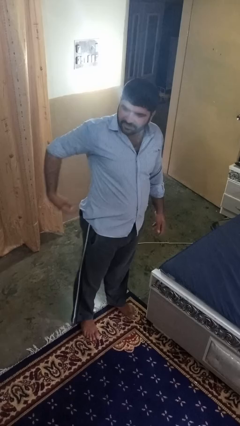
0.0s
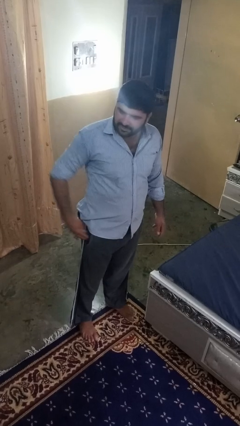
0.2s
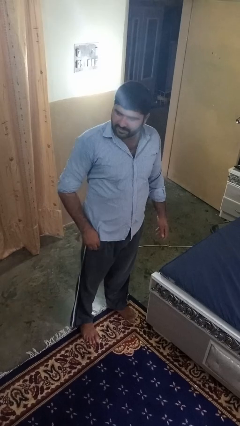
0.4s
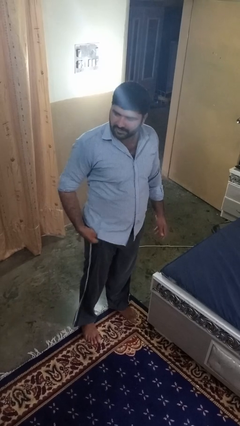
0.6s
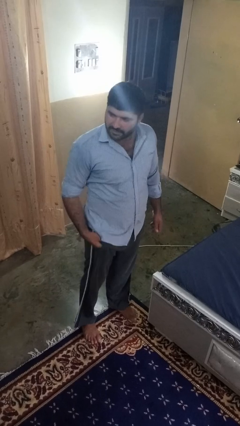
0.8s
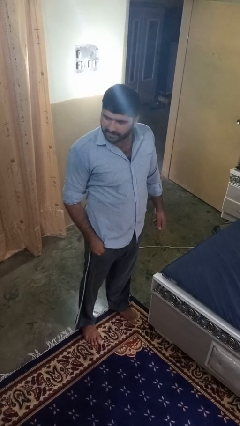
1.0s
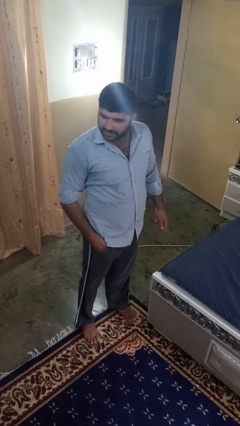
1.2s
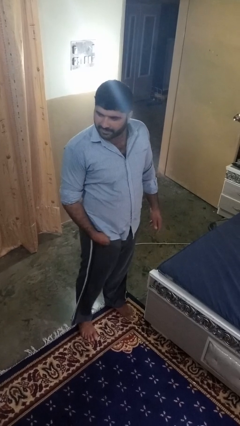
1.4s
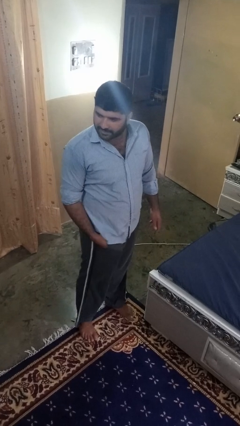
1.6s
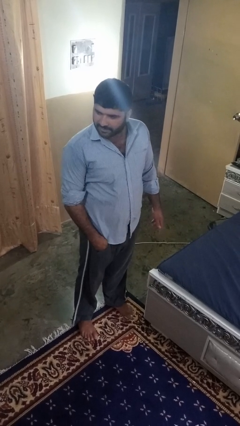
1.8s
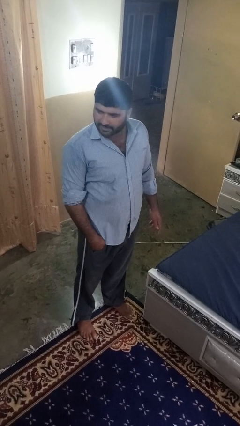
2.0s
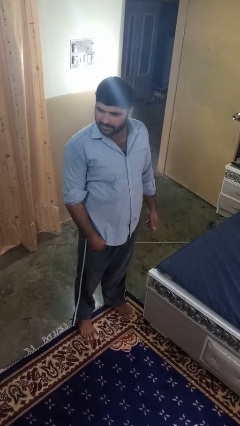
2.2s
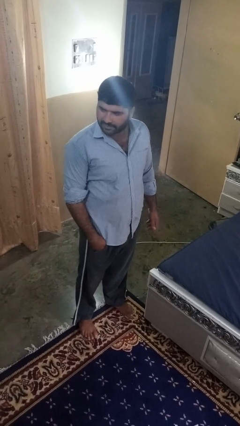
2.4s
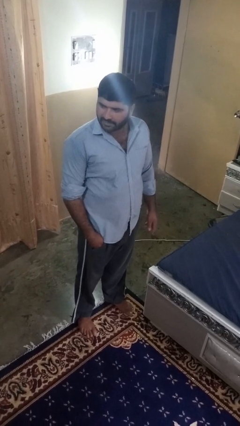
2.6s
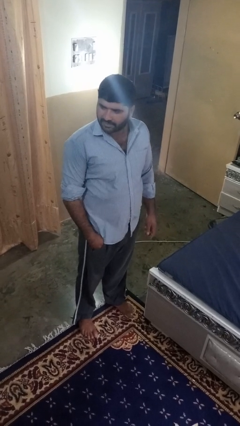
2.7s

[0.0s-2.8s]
person puts hands in back pockets

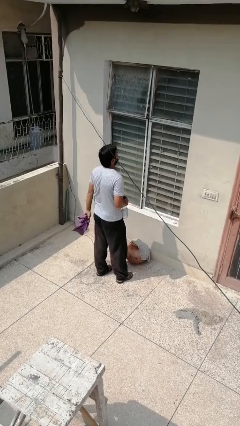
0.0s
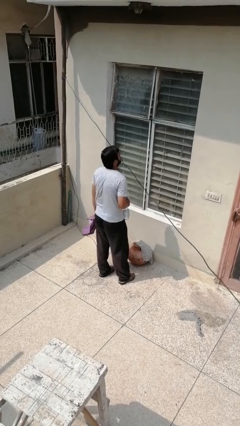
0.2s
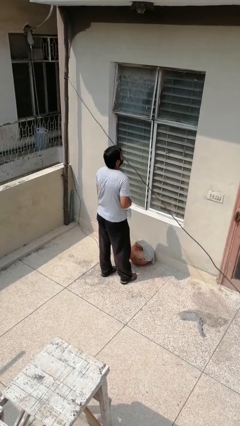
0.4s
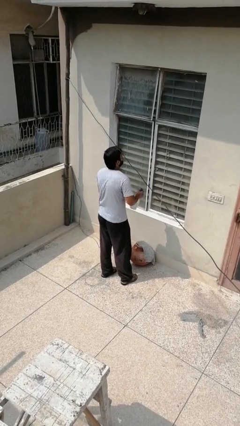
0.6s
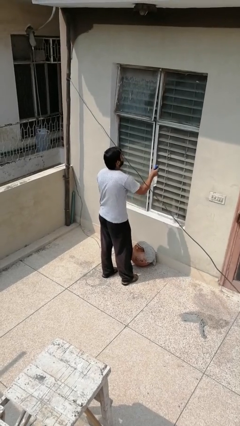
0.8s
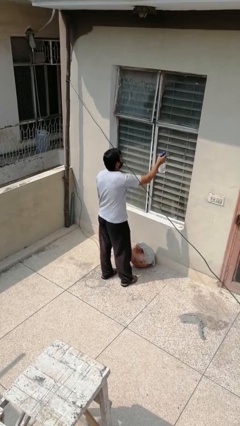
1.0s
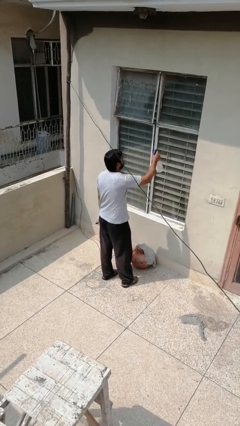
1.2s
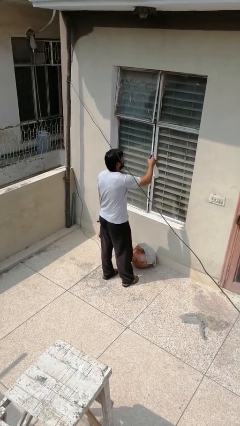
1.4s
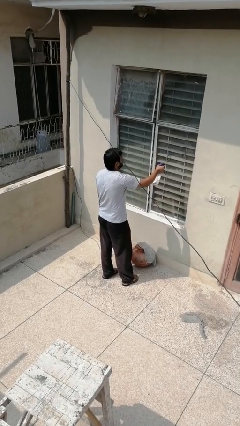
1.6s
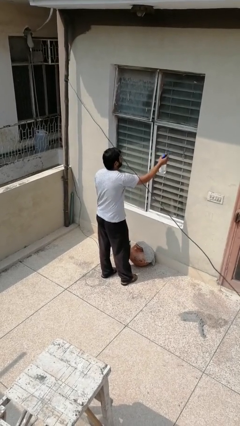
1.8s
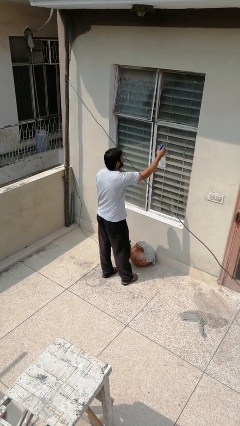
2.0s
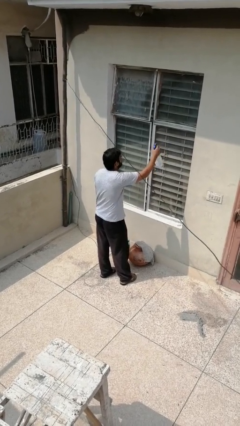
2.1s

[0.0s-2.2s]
person sprays from bottle

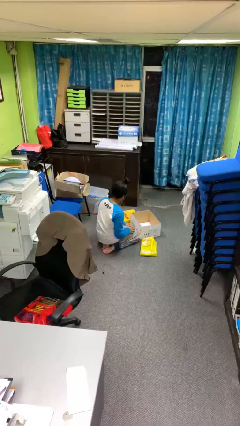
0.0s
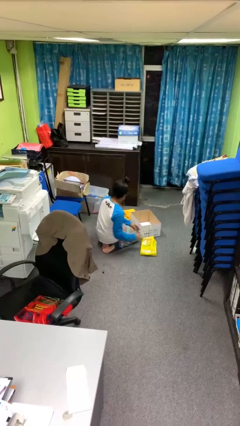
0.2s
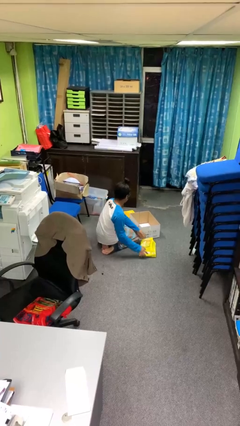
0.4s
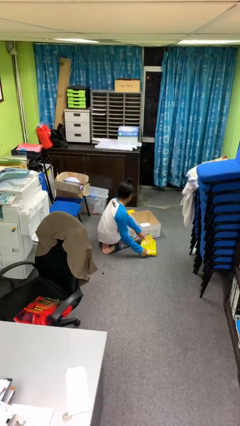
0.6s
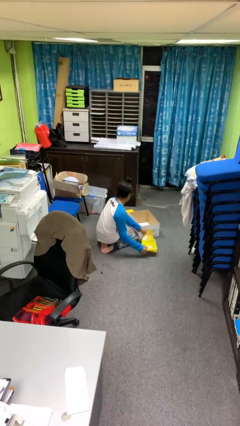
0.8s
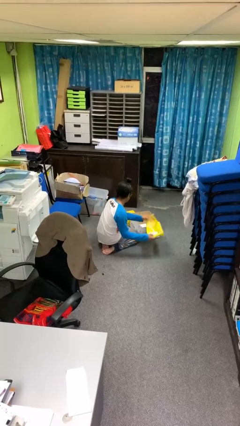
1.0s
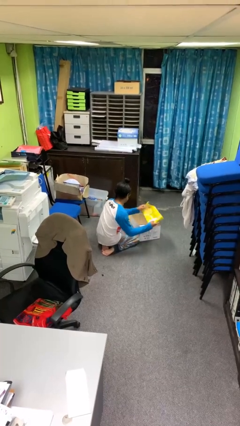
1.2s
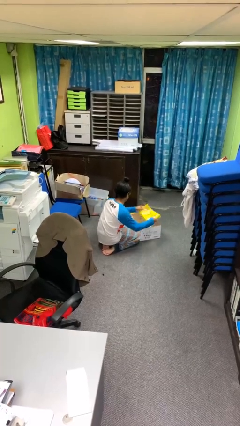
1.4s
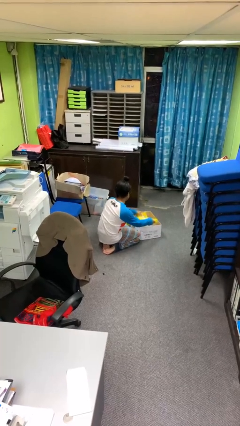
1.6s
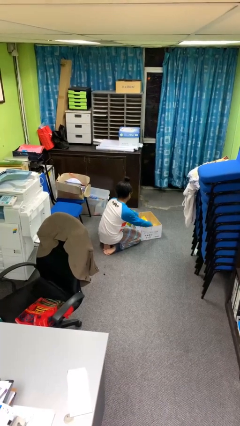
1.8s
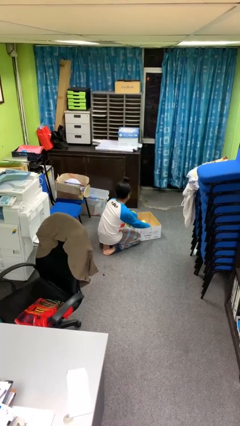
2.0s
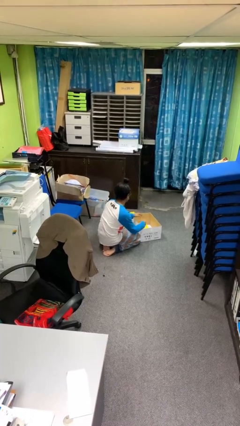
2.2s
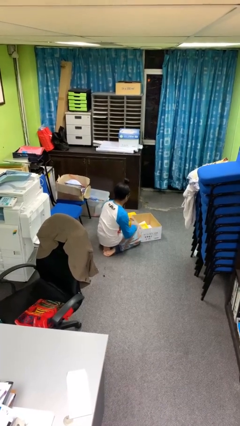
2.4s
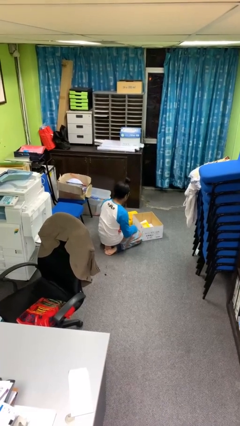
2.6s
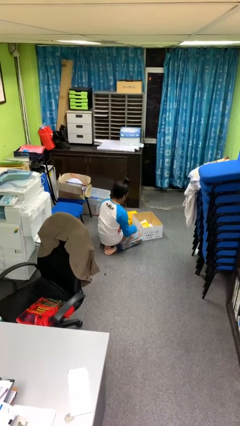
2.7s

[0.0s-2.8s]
person puts object into box

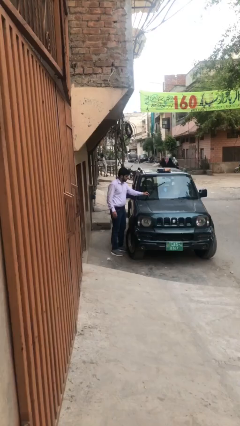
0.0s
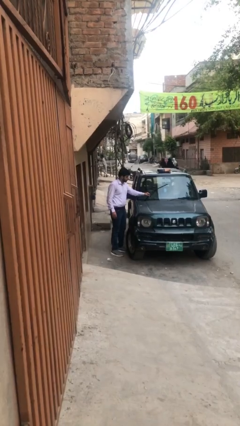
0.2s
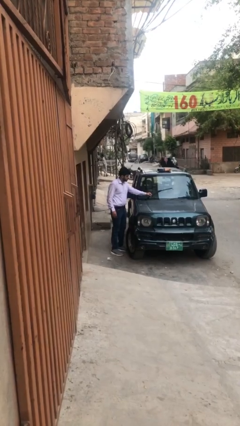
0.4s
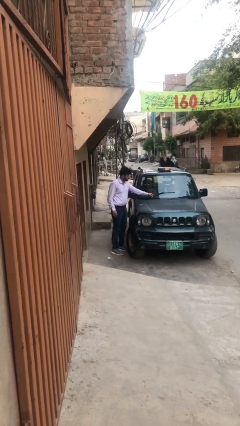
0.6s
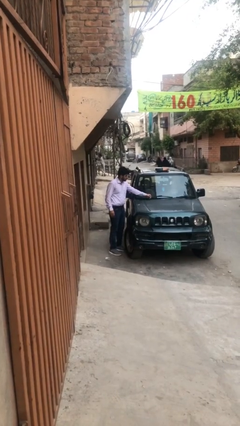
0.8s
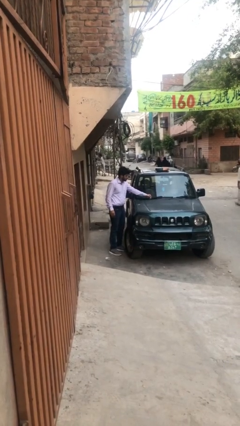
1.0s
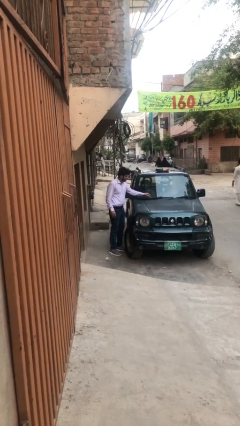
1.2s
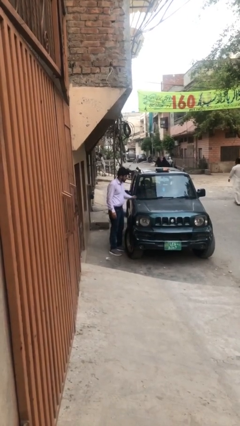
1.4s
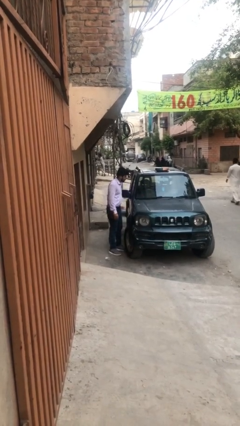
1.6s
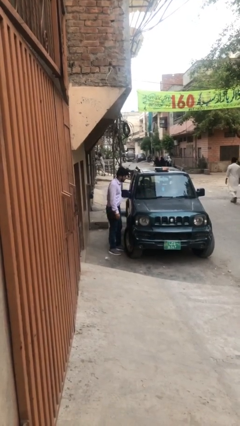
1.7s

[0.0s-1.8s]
person flips down car wipers

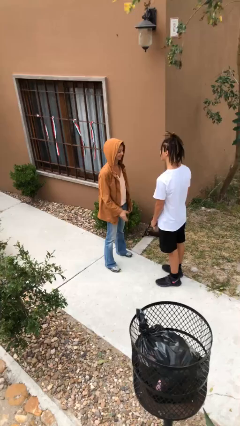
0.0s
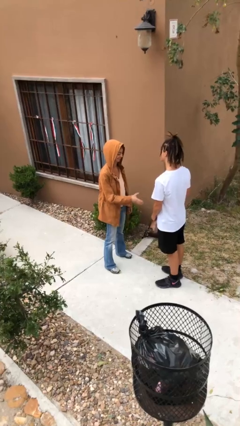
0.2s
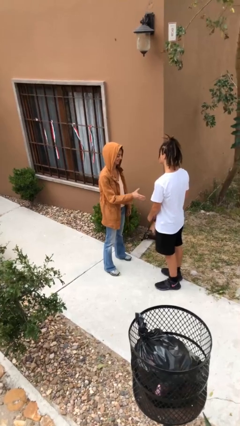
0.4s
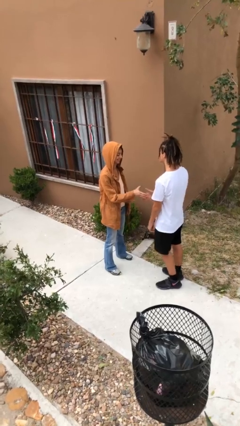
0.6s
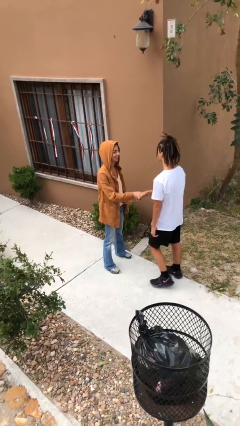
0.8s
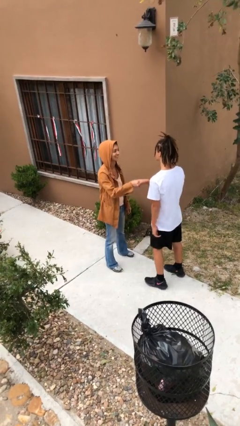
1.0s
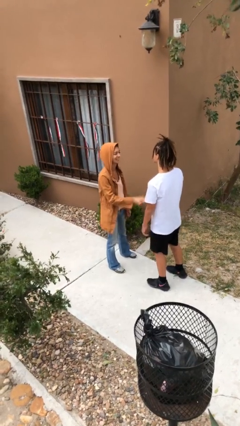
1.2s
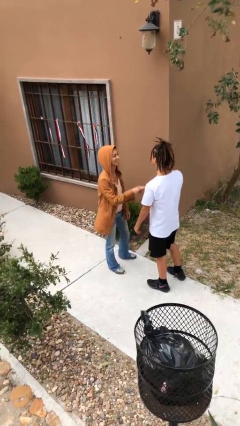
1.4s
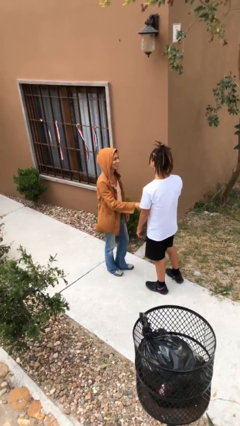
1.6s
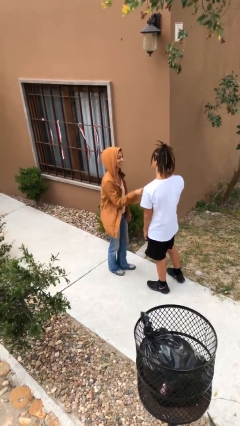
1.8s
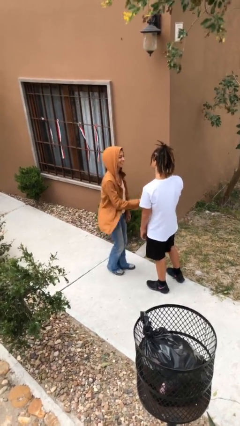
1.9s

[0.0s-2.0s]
person shakes hand

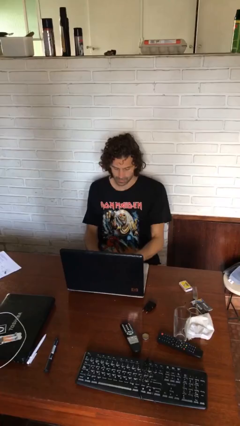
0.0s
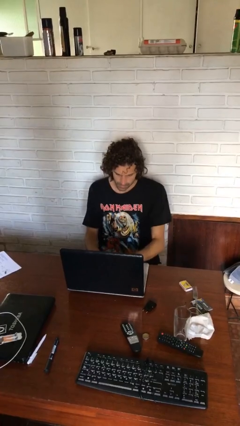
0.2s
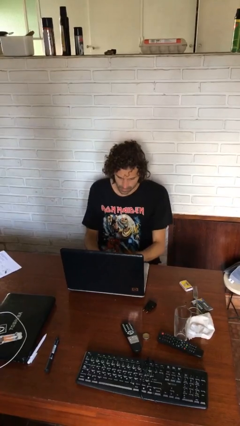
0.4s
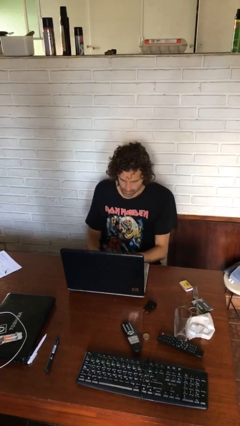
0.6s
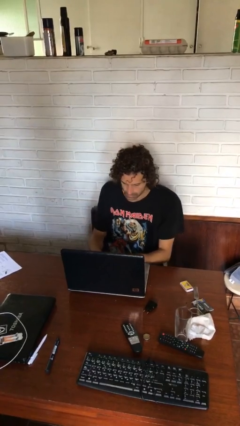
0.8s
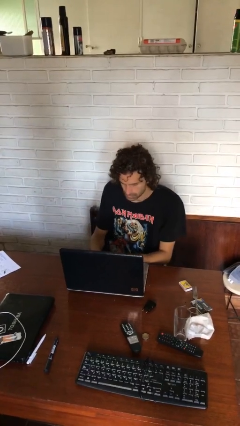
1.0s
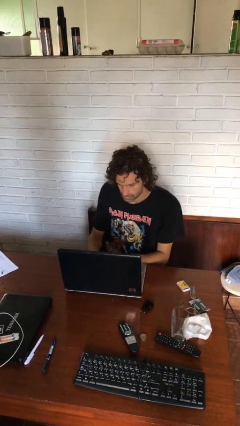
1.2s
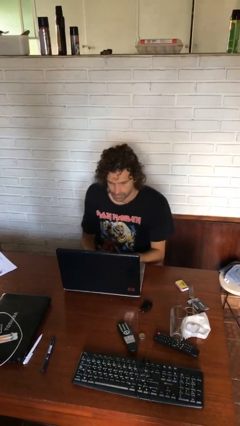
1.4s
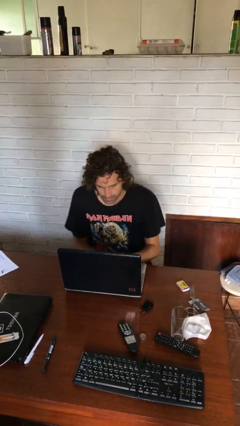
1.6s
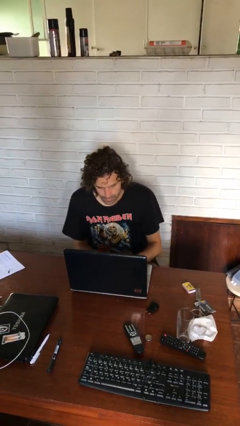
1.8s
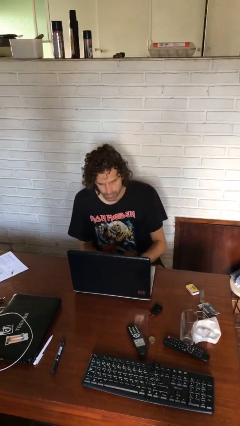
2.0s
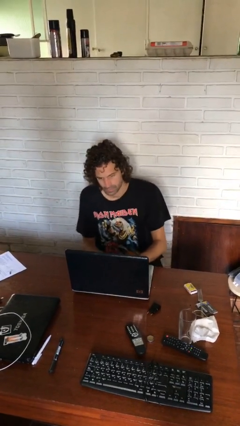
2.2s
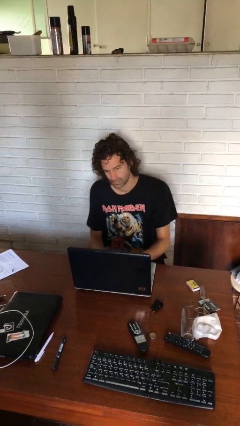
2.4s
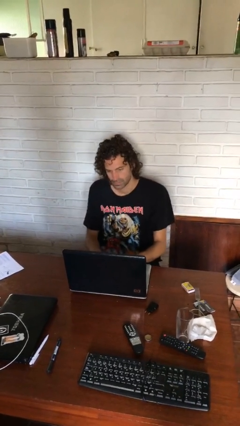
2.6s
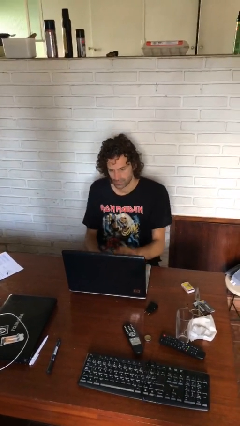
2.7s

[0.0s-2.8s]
person interacts with laptop

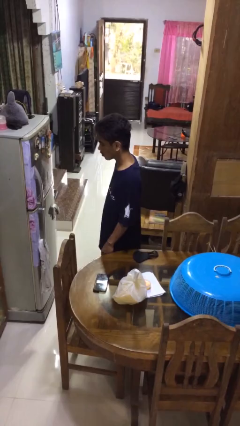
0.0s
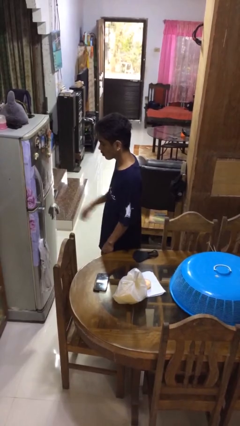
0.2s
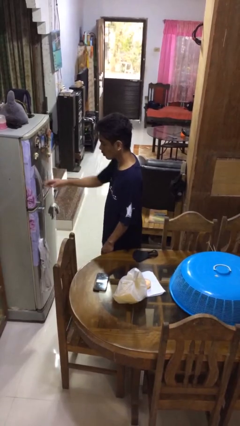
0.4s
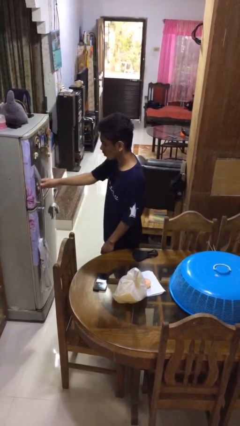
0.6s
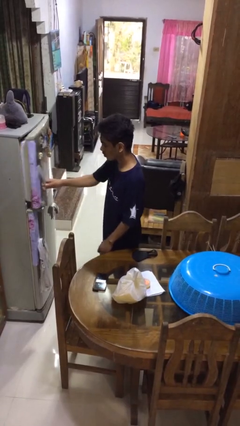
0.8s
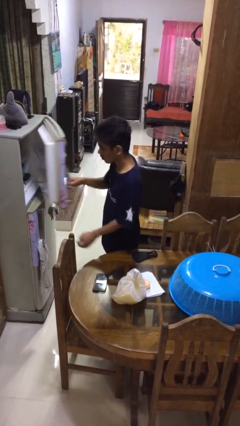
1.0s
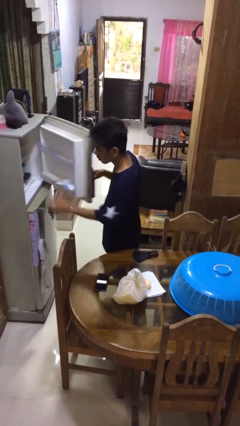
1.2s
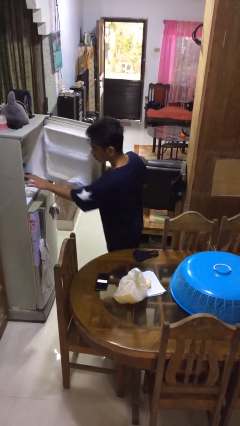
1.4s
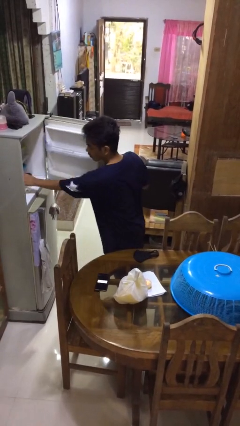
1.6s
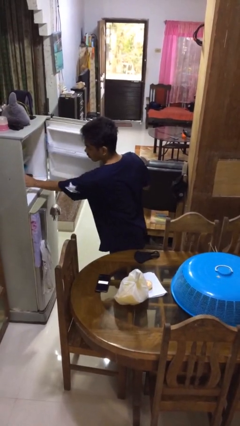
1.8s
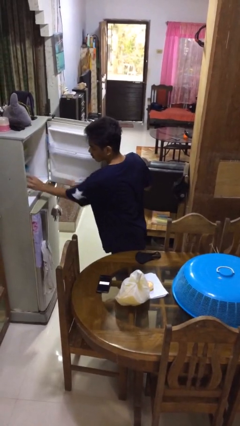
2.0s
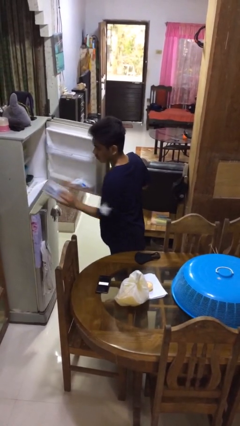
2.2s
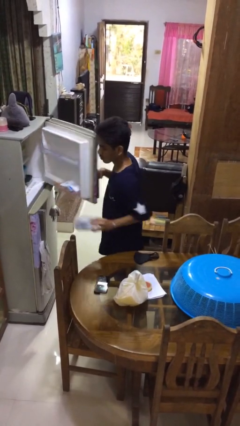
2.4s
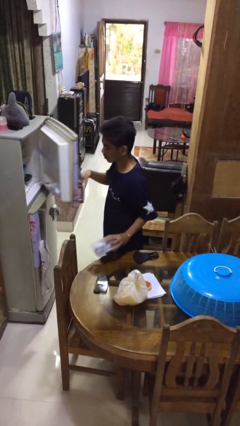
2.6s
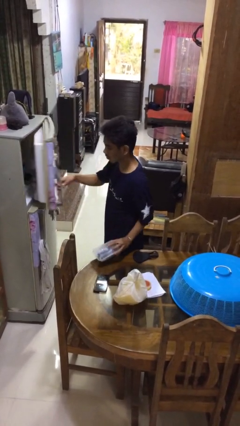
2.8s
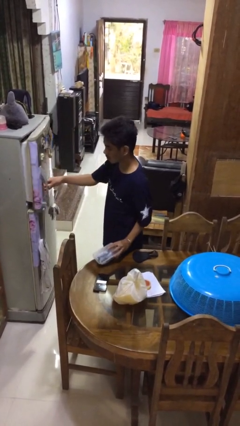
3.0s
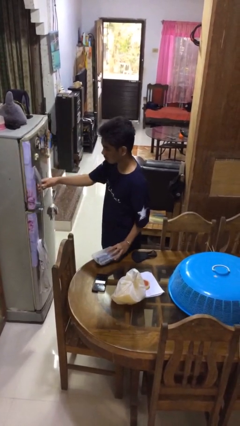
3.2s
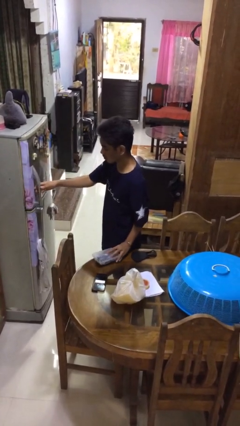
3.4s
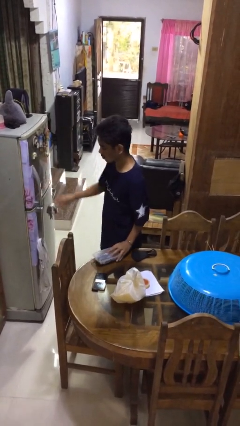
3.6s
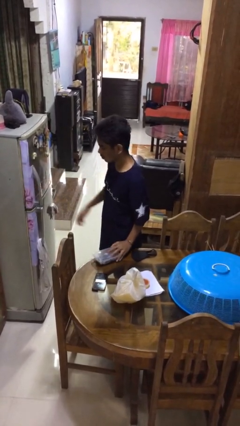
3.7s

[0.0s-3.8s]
person takes object from refrigerator
